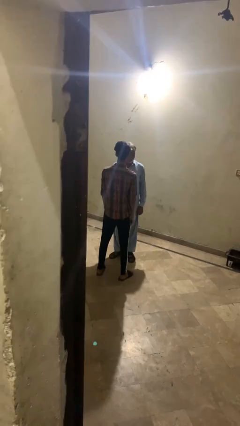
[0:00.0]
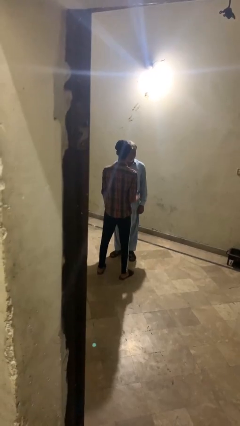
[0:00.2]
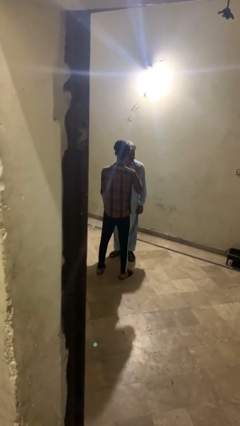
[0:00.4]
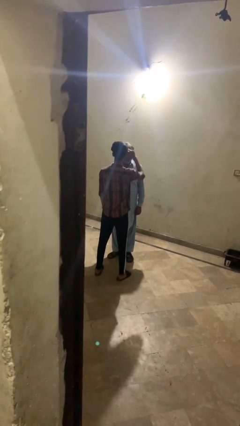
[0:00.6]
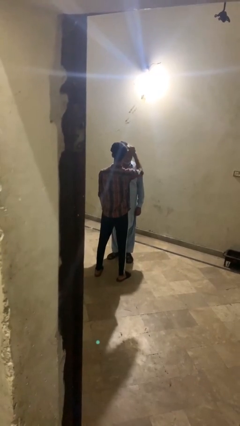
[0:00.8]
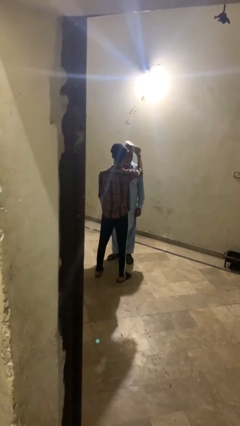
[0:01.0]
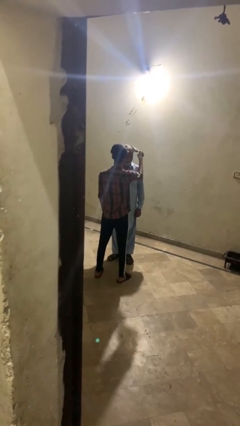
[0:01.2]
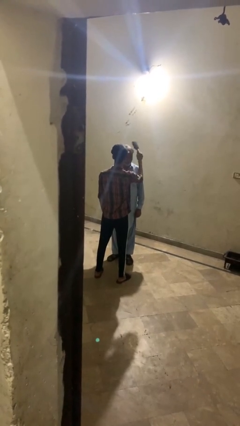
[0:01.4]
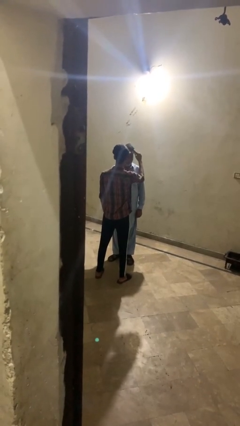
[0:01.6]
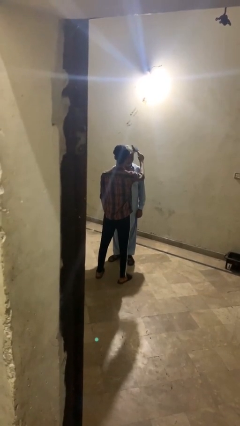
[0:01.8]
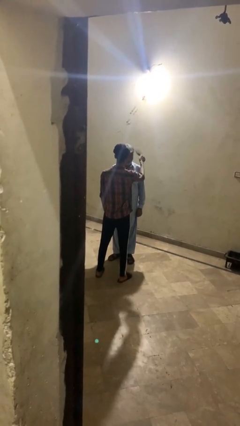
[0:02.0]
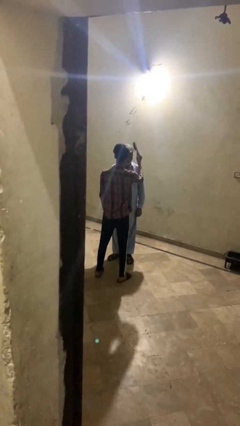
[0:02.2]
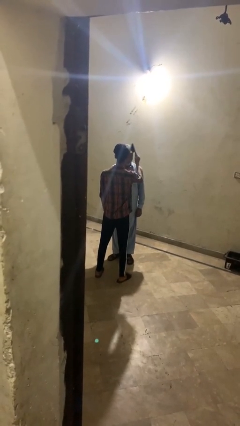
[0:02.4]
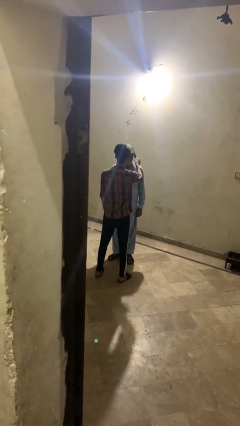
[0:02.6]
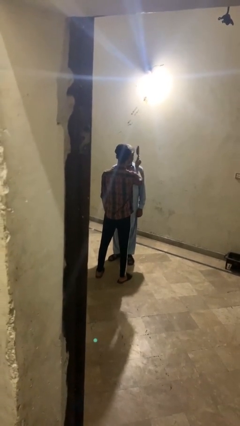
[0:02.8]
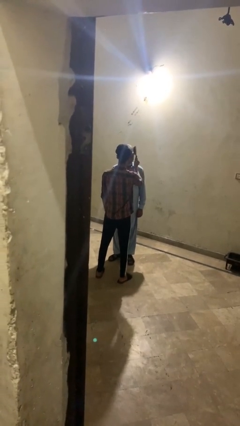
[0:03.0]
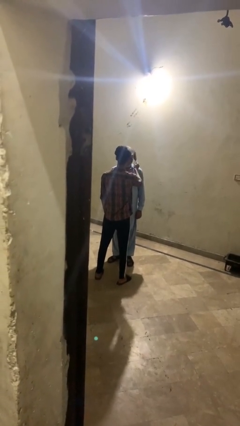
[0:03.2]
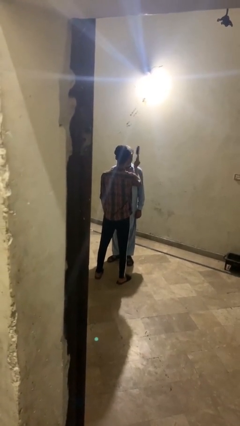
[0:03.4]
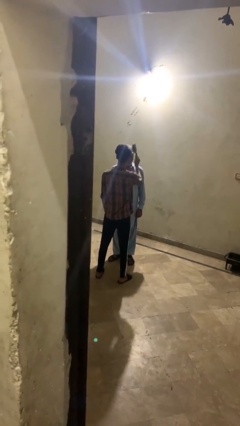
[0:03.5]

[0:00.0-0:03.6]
person brushes hair of person

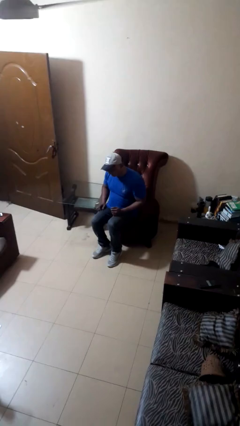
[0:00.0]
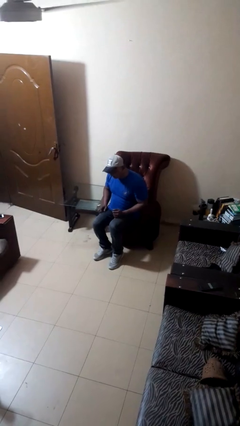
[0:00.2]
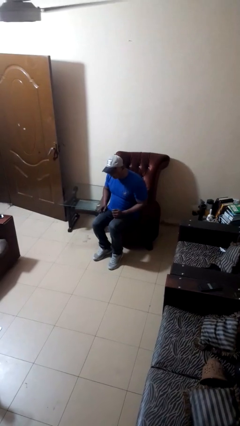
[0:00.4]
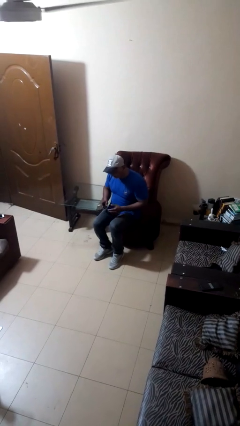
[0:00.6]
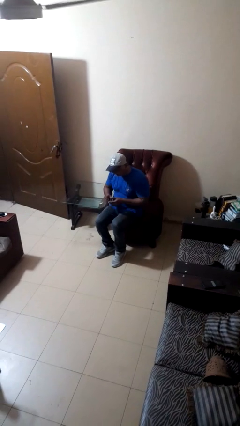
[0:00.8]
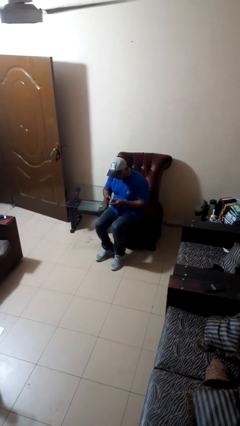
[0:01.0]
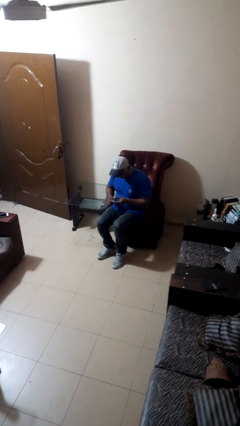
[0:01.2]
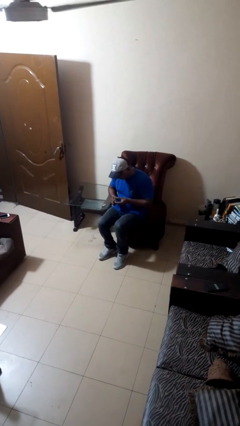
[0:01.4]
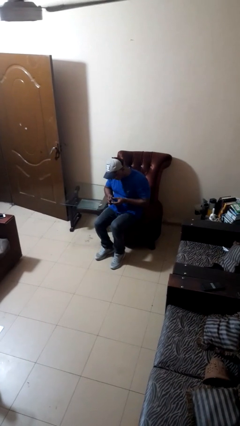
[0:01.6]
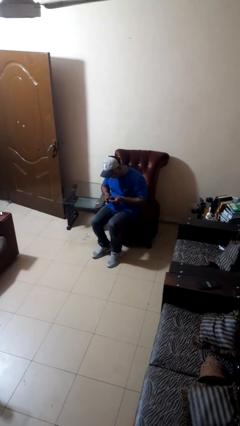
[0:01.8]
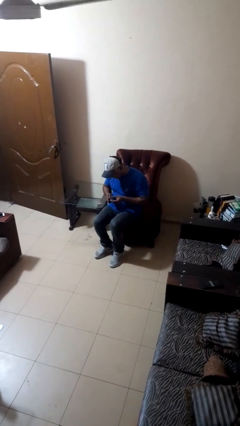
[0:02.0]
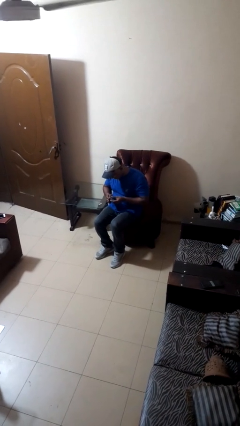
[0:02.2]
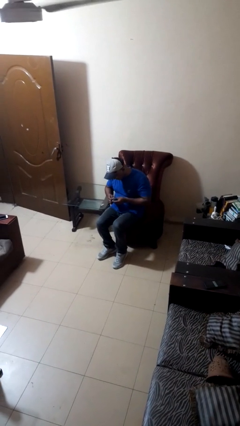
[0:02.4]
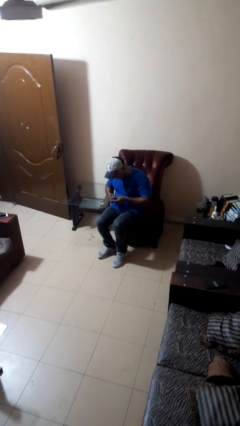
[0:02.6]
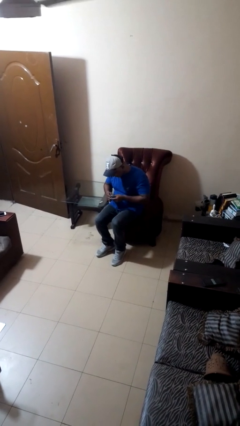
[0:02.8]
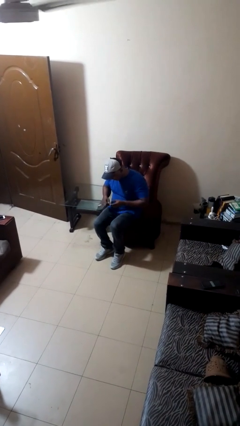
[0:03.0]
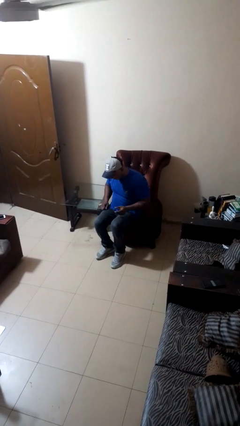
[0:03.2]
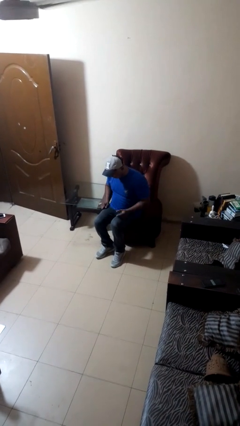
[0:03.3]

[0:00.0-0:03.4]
person clips fingernails

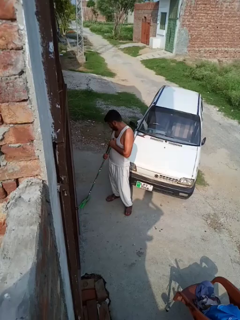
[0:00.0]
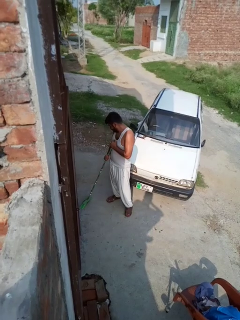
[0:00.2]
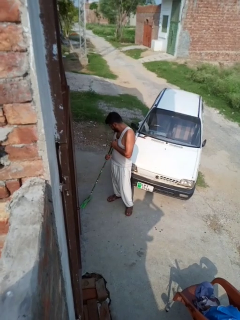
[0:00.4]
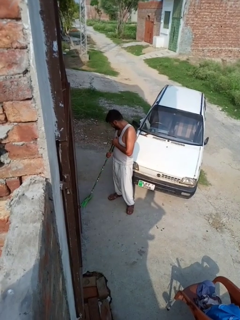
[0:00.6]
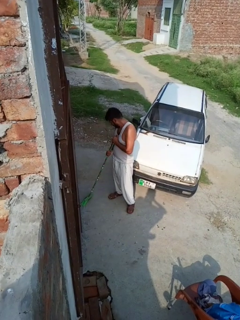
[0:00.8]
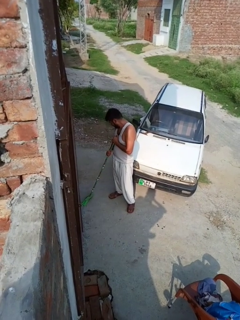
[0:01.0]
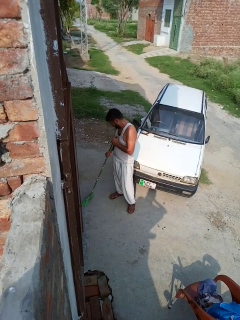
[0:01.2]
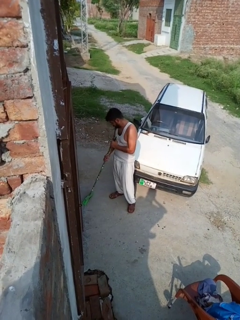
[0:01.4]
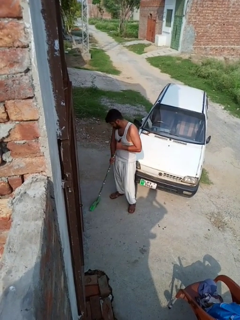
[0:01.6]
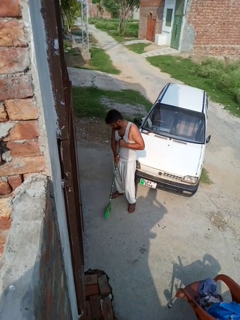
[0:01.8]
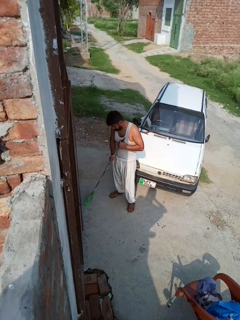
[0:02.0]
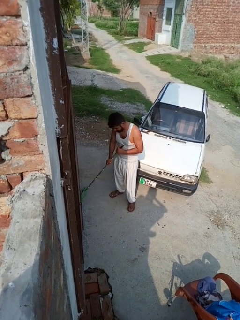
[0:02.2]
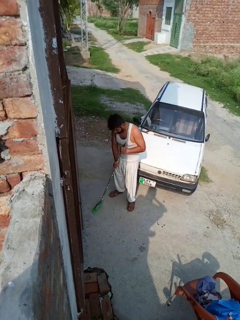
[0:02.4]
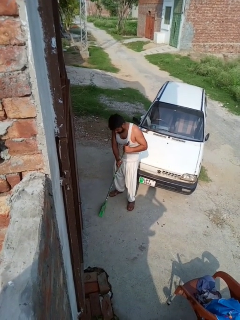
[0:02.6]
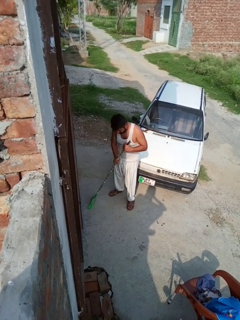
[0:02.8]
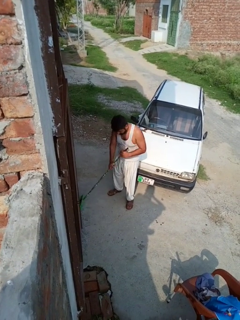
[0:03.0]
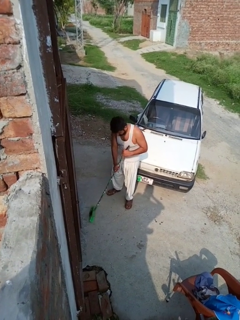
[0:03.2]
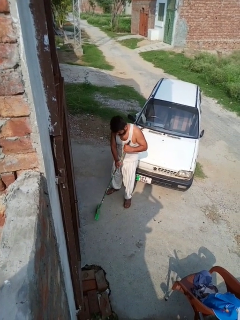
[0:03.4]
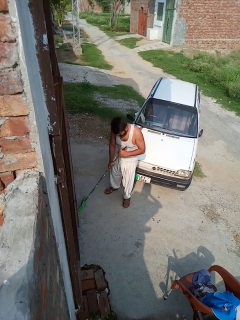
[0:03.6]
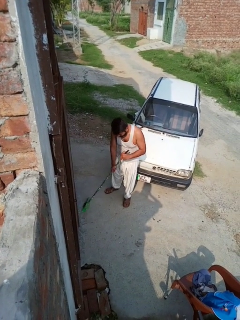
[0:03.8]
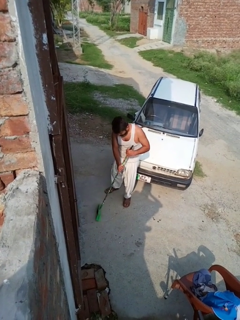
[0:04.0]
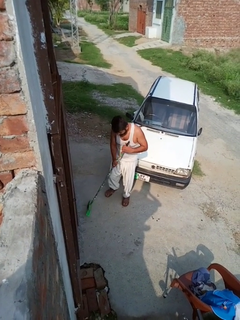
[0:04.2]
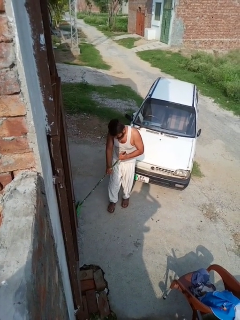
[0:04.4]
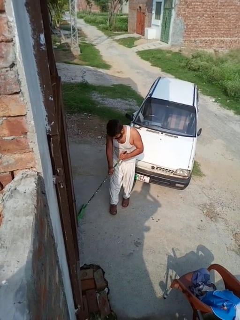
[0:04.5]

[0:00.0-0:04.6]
person sweeps floor

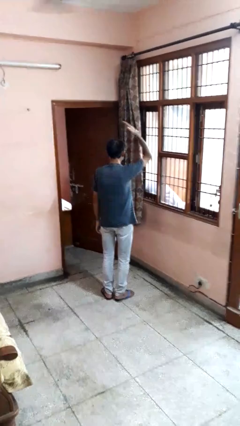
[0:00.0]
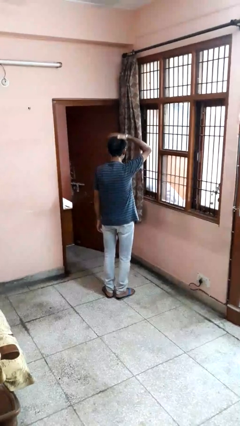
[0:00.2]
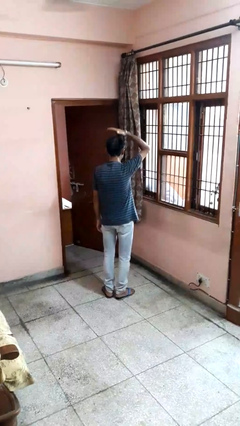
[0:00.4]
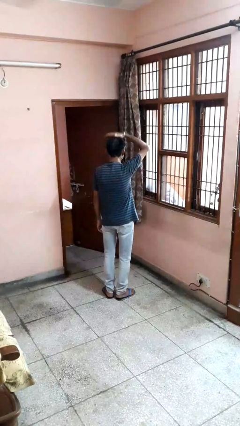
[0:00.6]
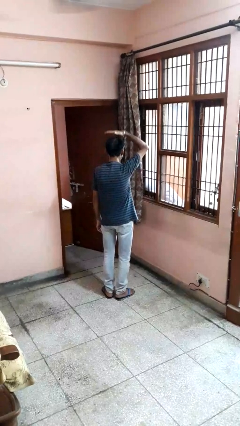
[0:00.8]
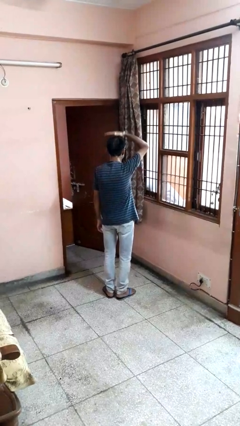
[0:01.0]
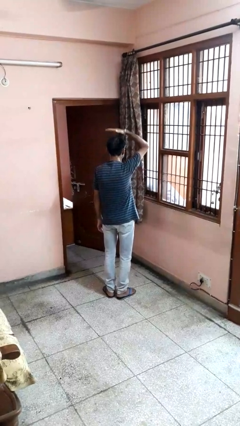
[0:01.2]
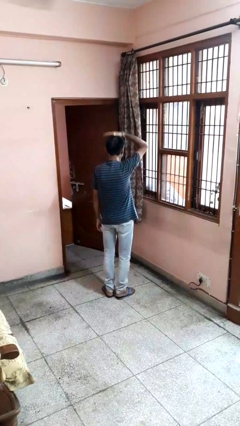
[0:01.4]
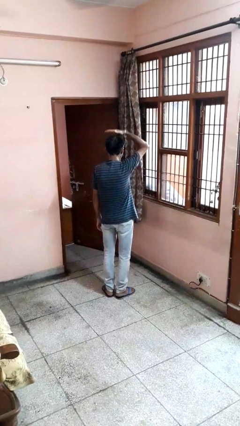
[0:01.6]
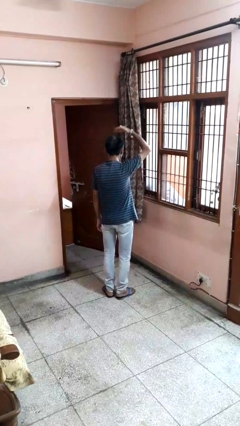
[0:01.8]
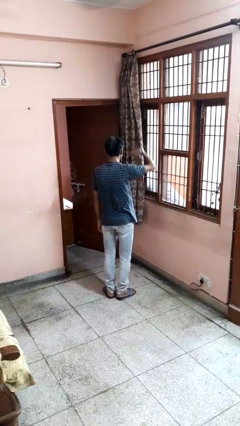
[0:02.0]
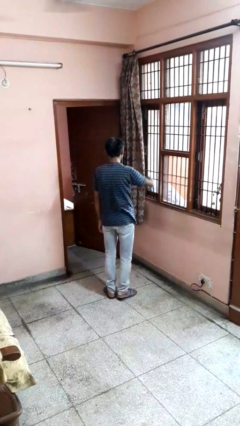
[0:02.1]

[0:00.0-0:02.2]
person pats head

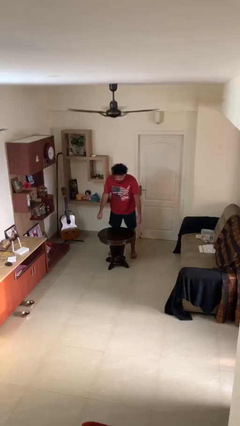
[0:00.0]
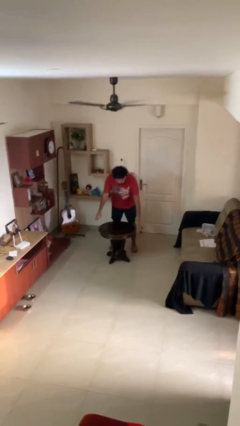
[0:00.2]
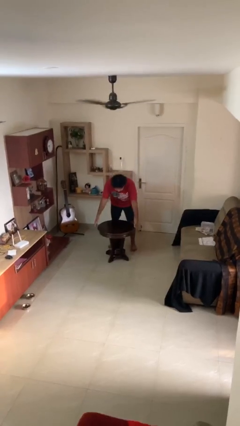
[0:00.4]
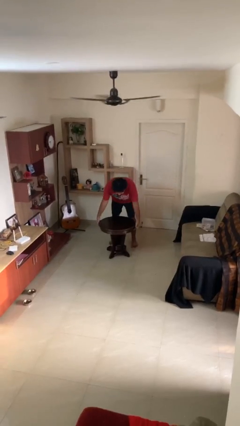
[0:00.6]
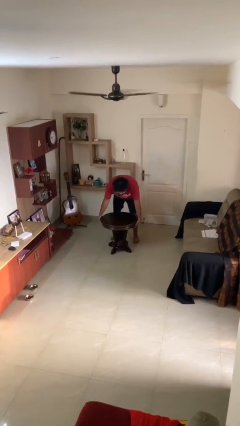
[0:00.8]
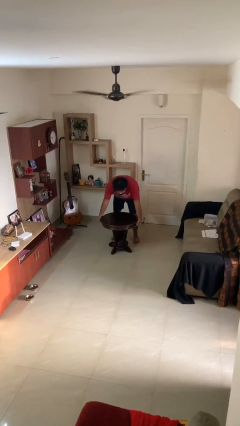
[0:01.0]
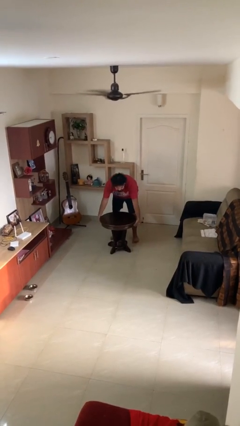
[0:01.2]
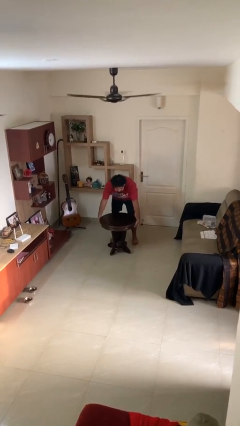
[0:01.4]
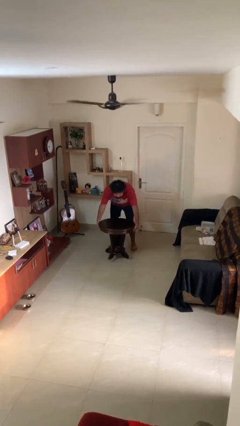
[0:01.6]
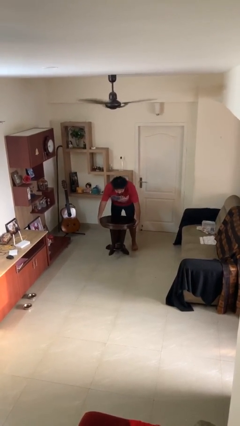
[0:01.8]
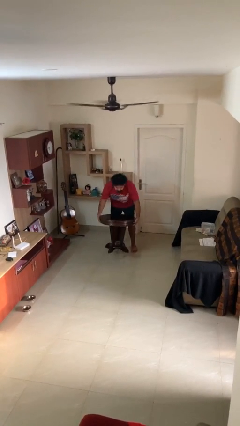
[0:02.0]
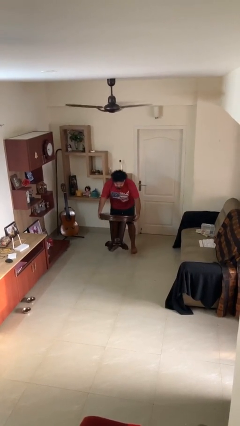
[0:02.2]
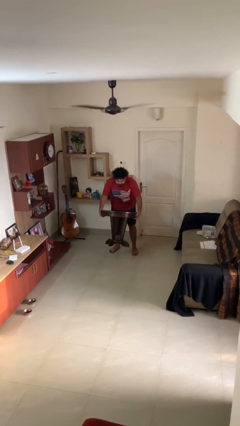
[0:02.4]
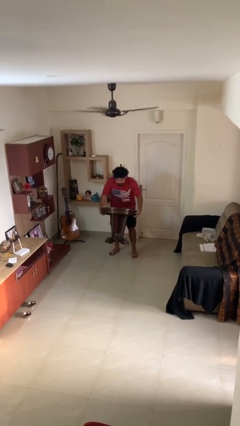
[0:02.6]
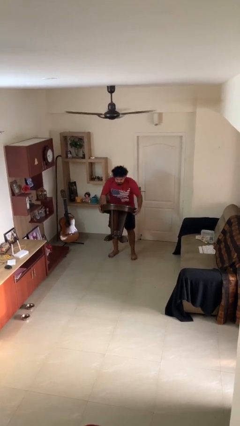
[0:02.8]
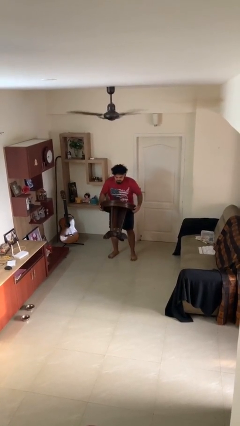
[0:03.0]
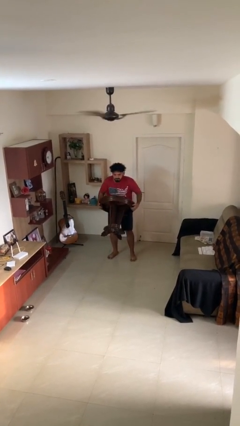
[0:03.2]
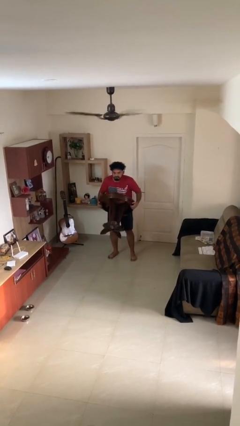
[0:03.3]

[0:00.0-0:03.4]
person picks up object from floor

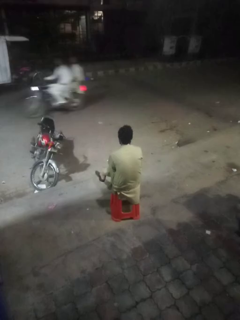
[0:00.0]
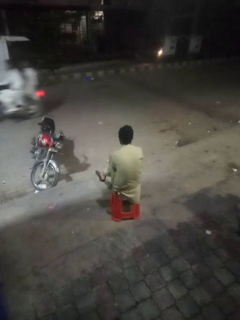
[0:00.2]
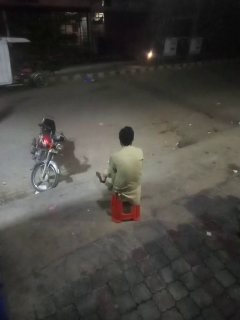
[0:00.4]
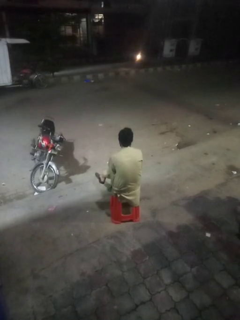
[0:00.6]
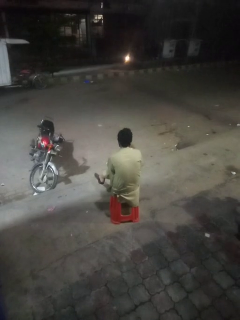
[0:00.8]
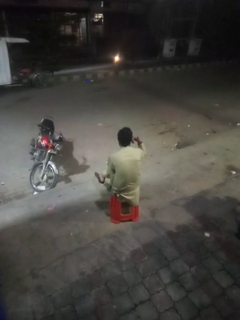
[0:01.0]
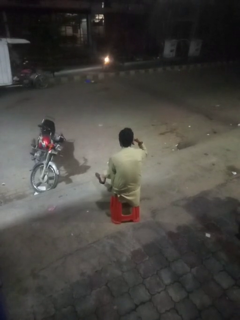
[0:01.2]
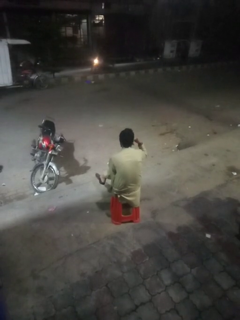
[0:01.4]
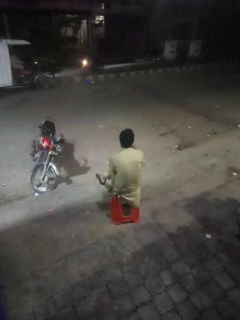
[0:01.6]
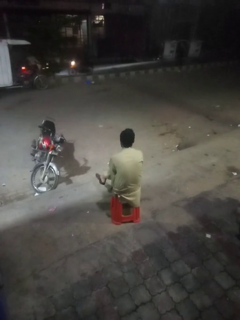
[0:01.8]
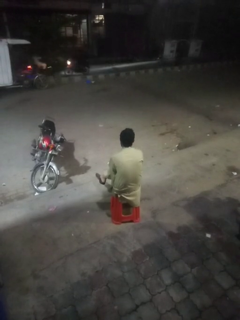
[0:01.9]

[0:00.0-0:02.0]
person gestures call me
